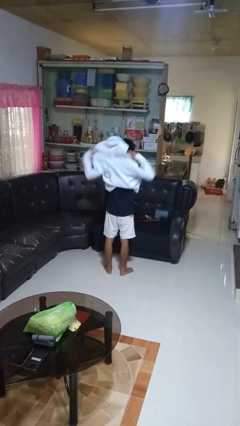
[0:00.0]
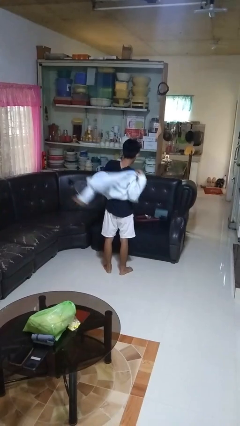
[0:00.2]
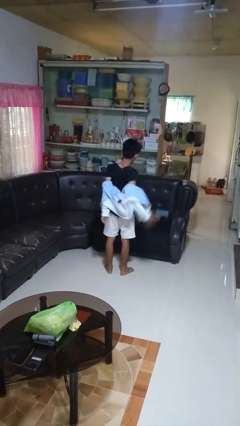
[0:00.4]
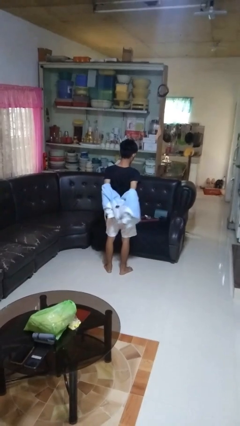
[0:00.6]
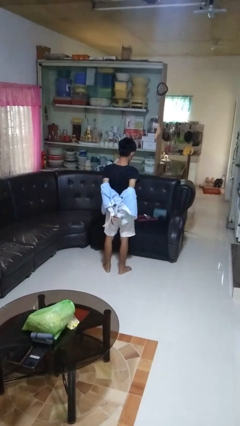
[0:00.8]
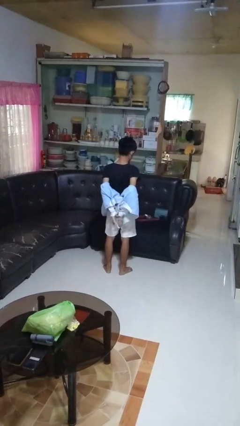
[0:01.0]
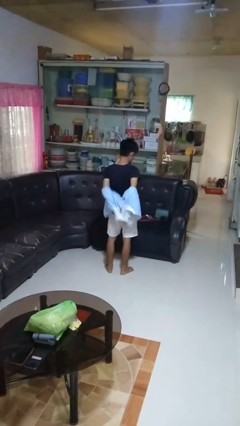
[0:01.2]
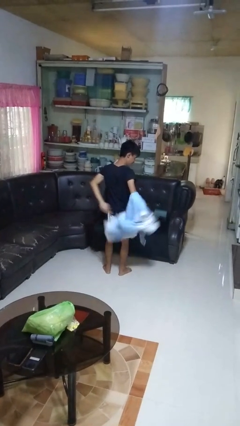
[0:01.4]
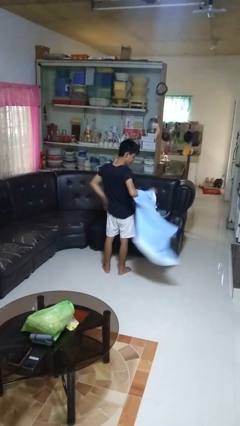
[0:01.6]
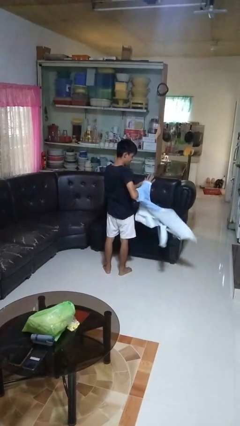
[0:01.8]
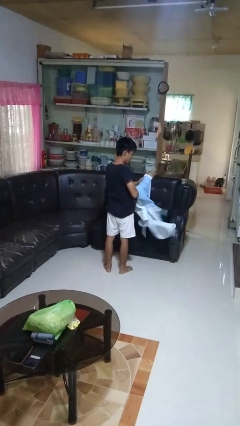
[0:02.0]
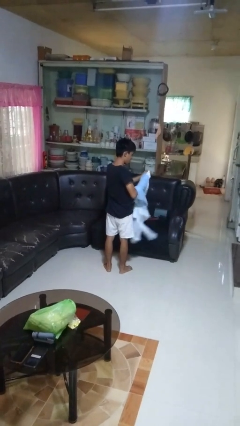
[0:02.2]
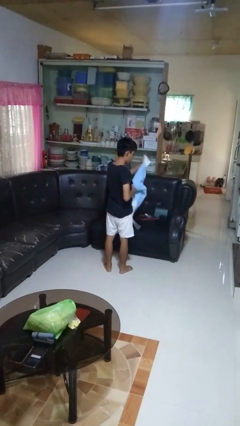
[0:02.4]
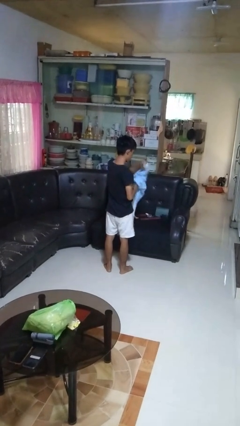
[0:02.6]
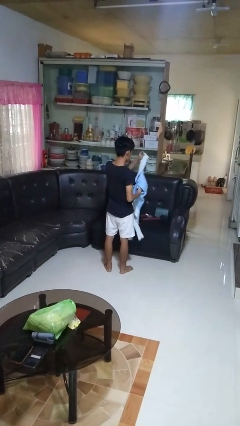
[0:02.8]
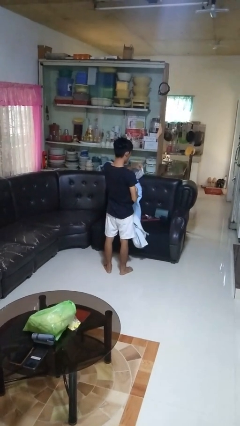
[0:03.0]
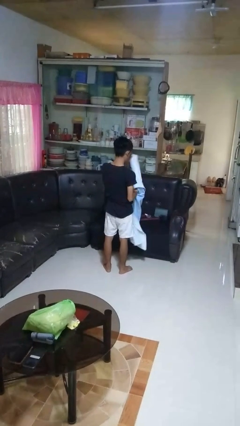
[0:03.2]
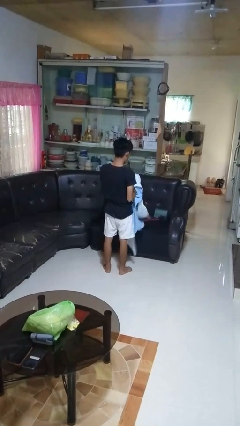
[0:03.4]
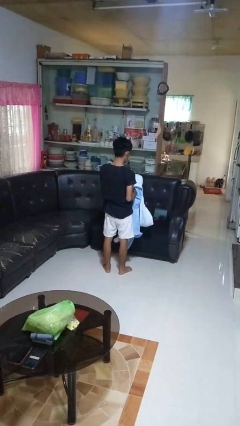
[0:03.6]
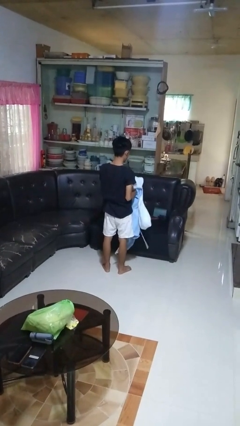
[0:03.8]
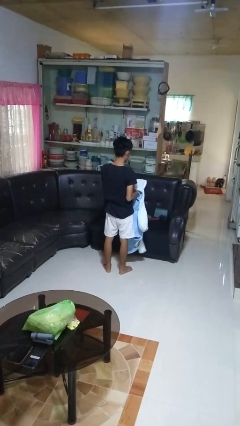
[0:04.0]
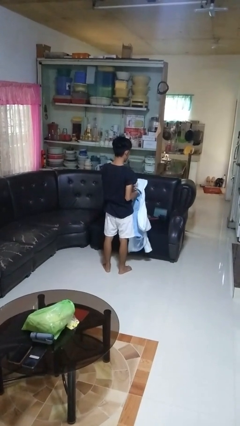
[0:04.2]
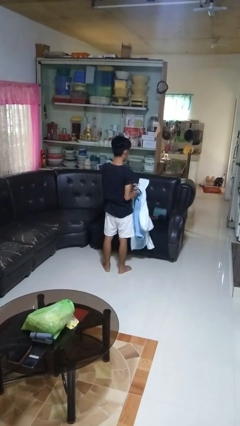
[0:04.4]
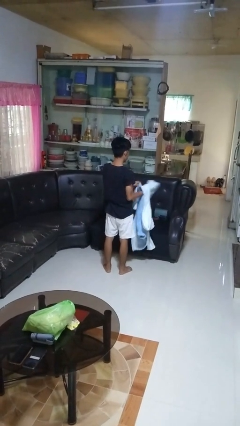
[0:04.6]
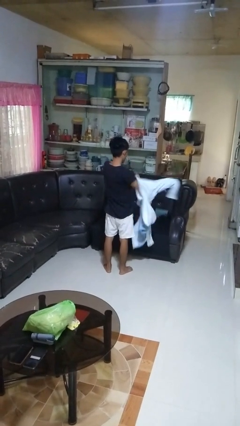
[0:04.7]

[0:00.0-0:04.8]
person takes off hoodie

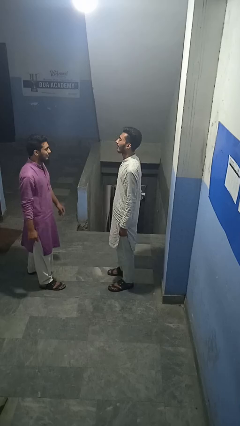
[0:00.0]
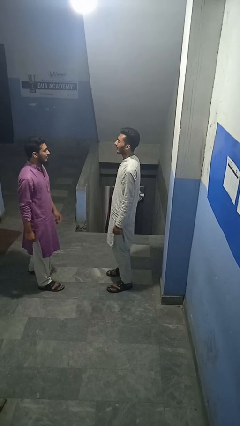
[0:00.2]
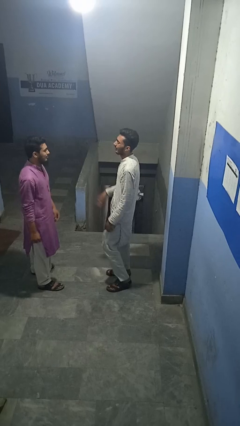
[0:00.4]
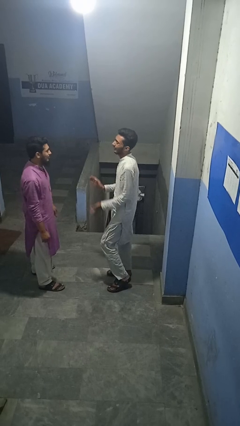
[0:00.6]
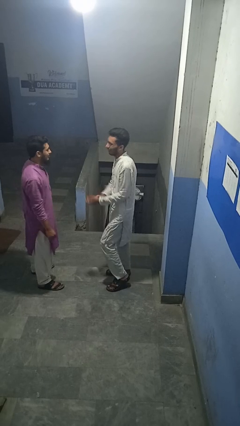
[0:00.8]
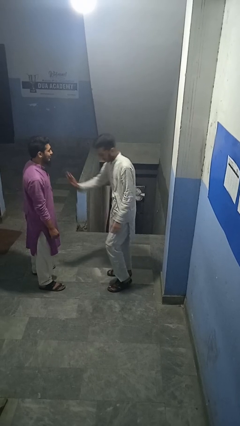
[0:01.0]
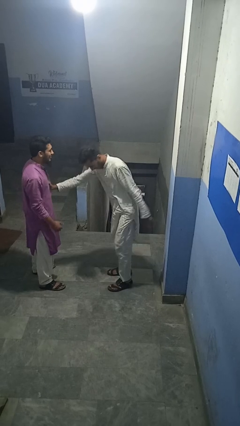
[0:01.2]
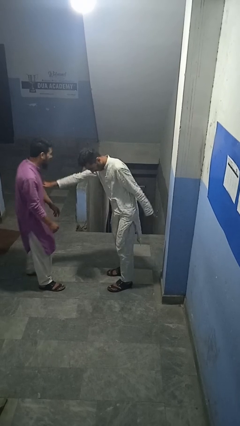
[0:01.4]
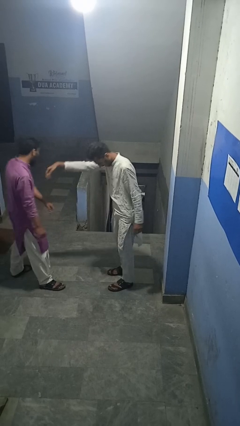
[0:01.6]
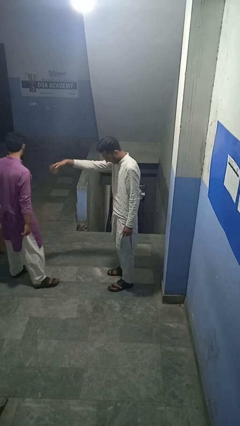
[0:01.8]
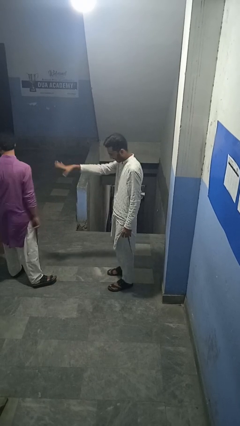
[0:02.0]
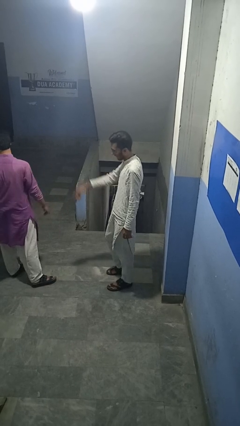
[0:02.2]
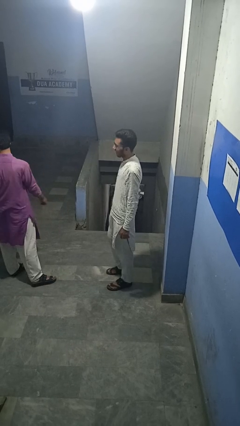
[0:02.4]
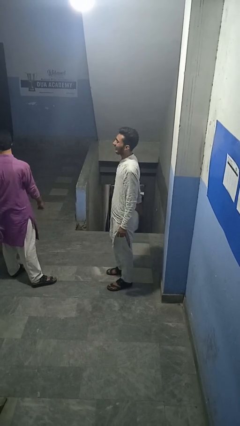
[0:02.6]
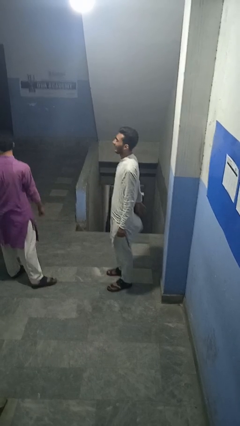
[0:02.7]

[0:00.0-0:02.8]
person shoves person

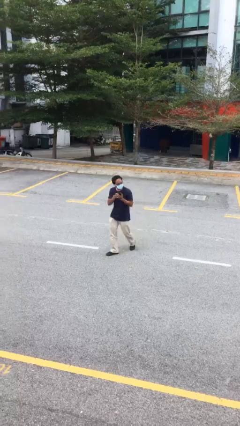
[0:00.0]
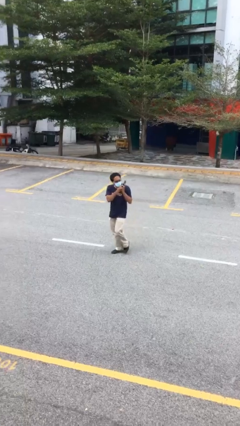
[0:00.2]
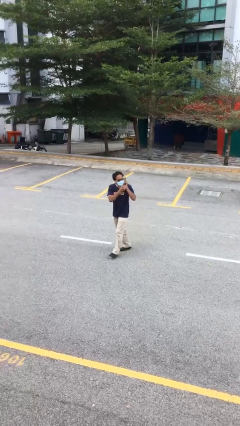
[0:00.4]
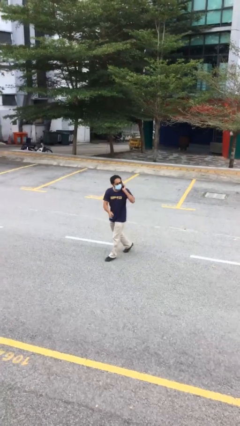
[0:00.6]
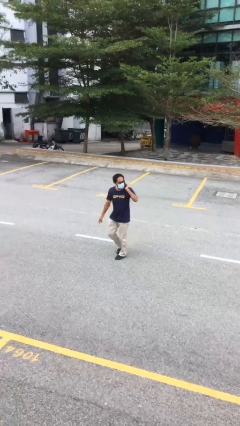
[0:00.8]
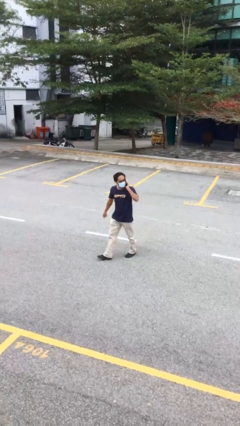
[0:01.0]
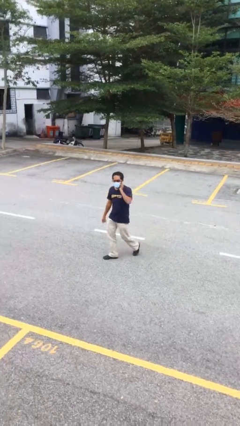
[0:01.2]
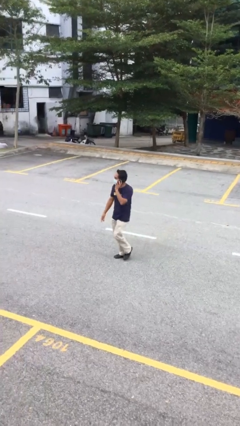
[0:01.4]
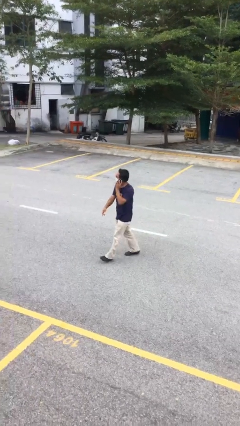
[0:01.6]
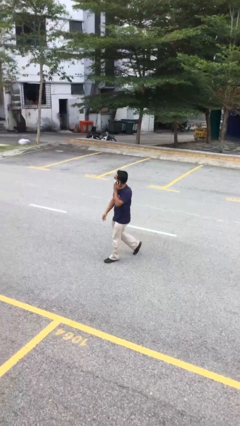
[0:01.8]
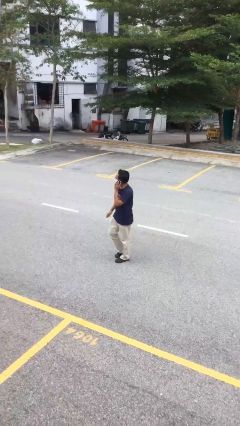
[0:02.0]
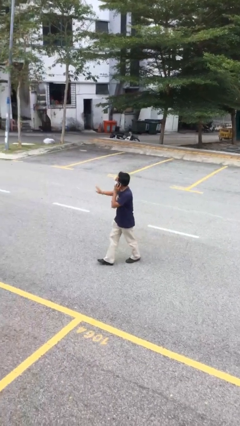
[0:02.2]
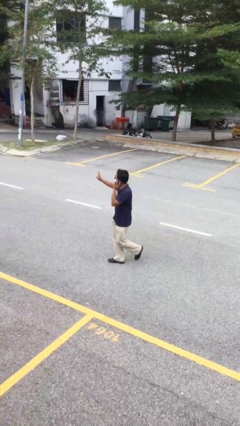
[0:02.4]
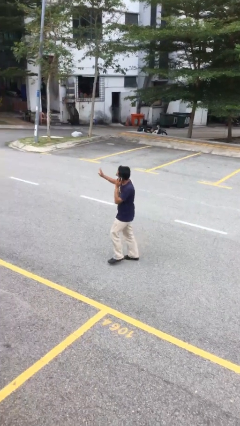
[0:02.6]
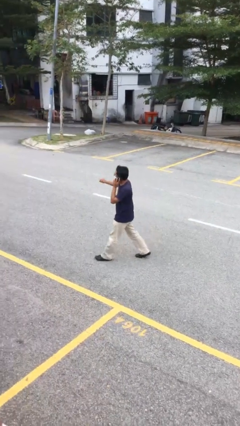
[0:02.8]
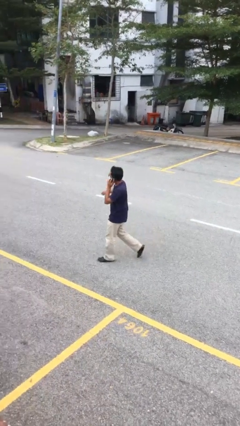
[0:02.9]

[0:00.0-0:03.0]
person talks on phone

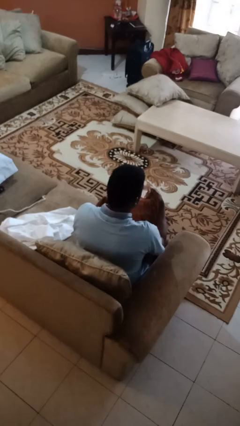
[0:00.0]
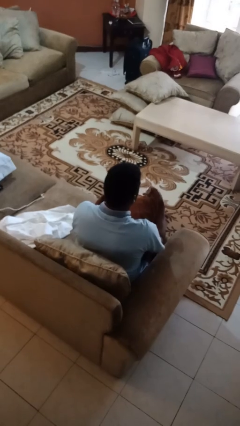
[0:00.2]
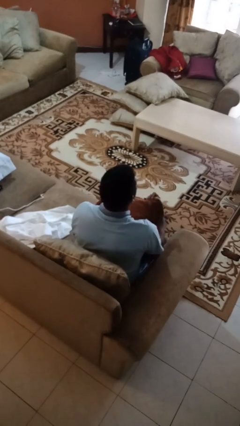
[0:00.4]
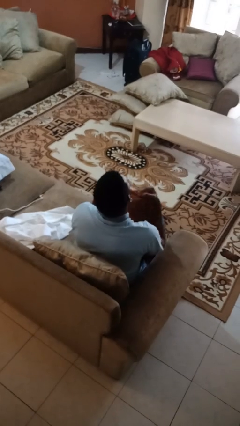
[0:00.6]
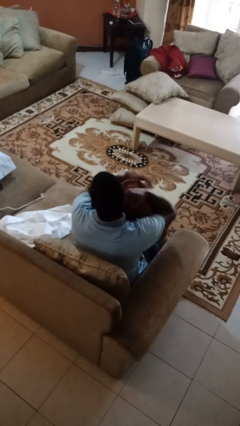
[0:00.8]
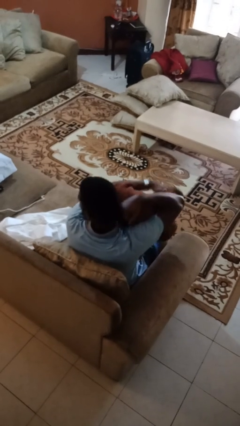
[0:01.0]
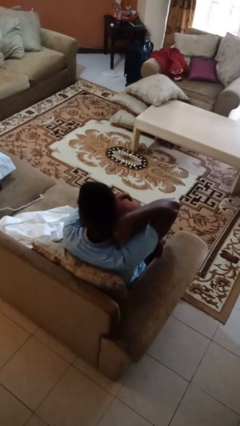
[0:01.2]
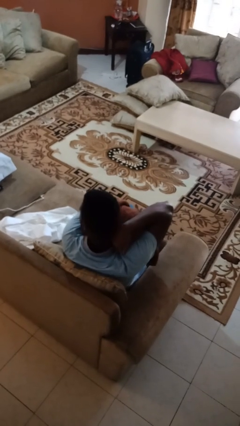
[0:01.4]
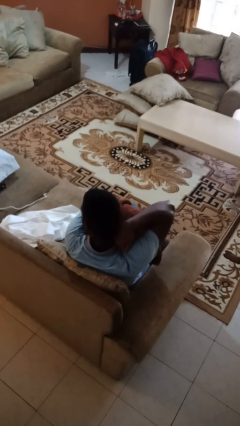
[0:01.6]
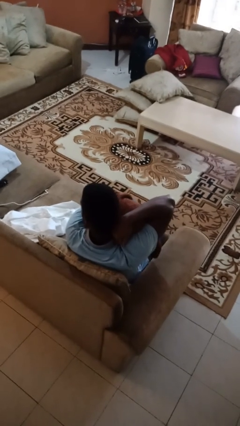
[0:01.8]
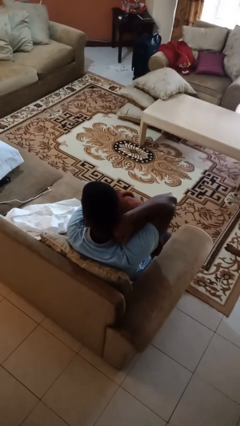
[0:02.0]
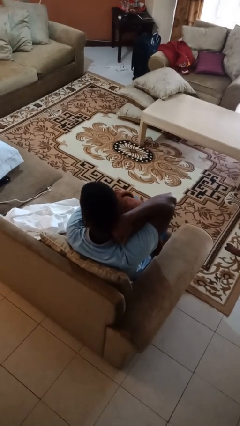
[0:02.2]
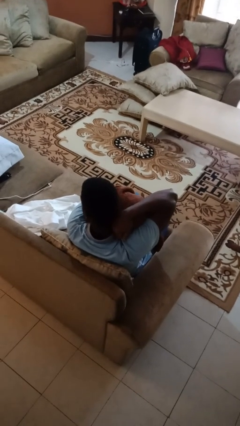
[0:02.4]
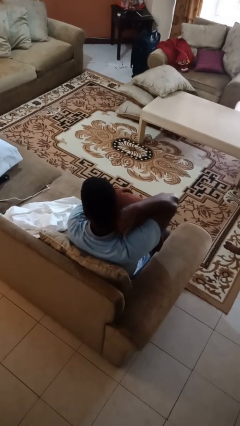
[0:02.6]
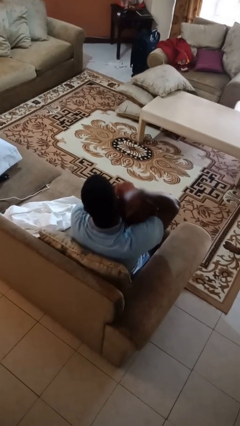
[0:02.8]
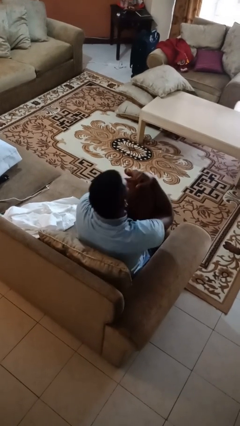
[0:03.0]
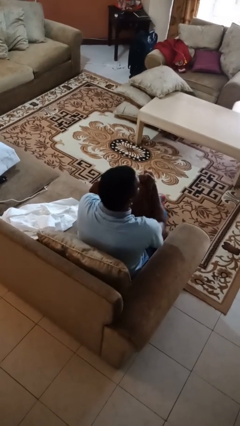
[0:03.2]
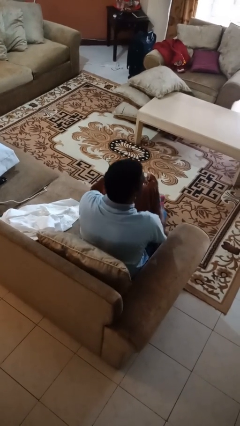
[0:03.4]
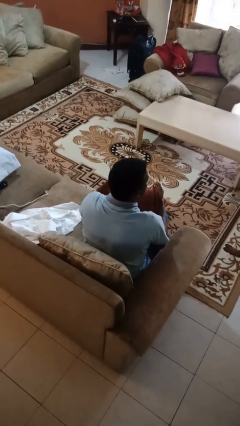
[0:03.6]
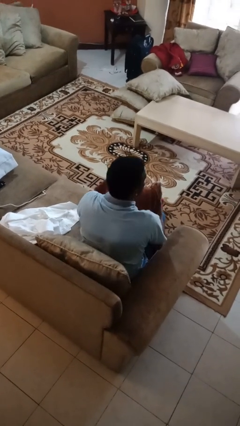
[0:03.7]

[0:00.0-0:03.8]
person hugs stuffed animal

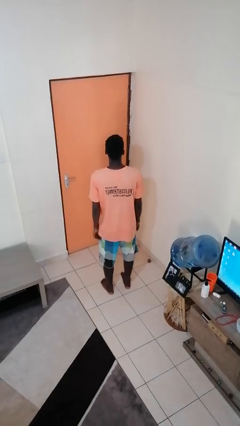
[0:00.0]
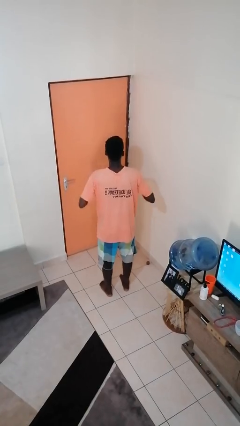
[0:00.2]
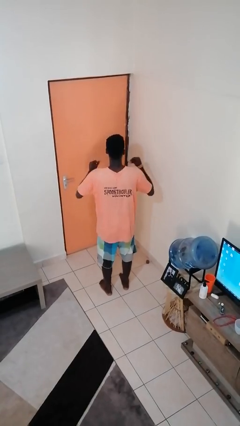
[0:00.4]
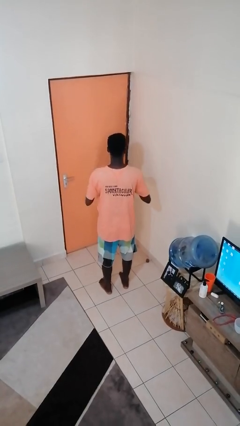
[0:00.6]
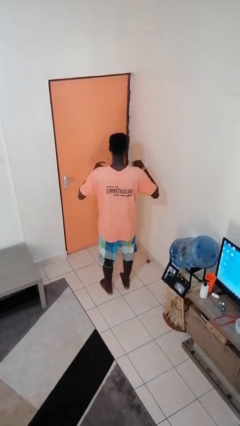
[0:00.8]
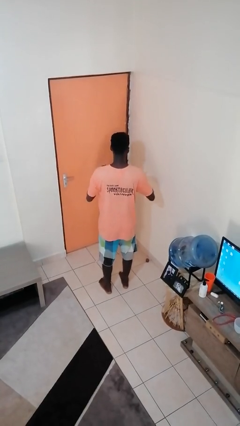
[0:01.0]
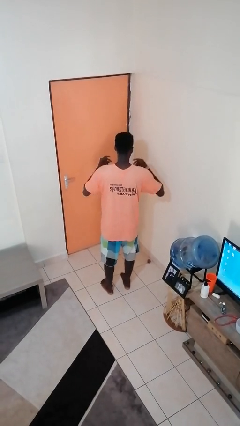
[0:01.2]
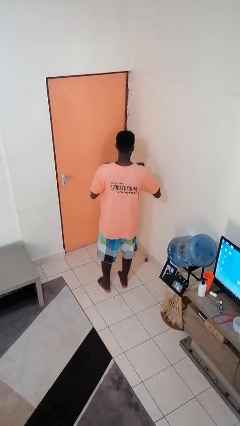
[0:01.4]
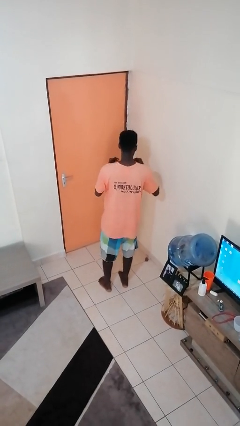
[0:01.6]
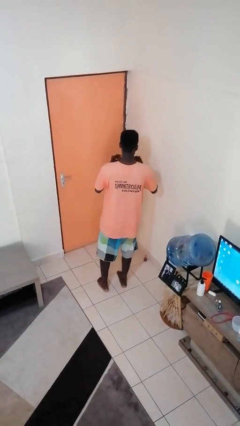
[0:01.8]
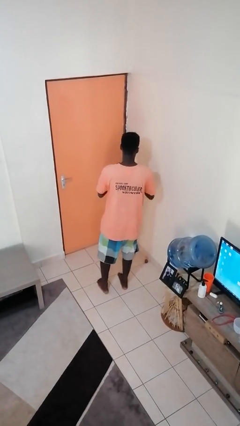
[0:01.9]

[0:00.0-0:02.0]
person snaps fingers

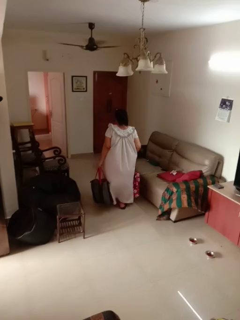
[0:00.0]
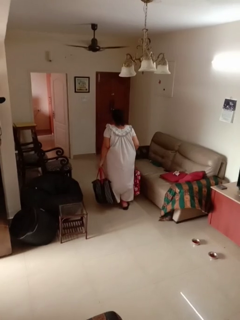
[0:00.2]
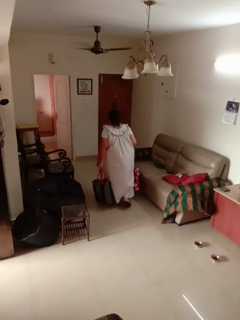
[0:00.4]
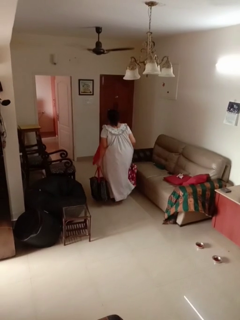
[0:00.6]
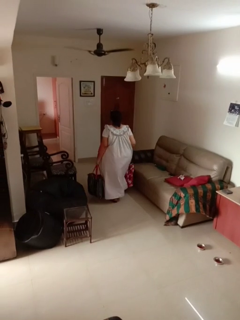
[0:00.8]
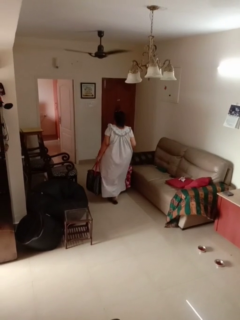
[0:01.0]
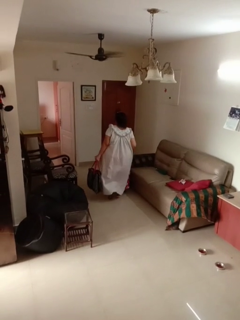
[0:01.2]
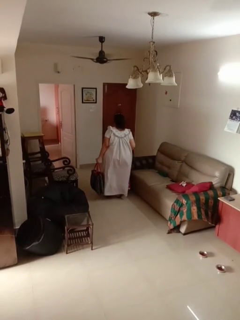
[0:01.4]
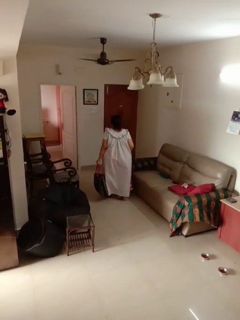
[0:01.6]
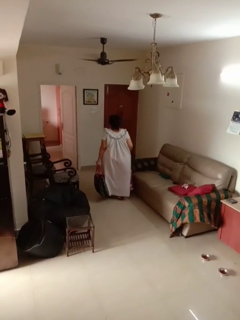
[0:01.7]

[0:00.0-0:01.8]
person carries groceries
